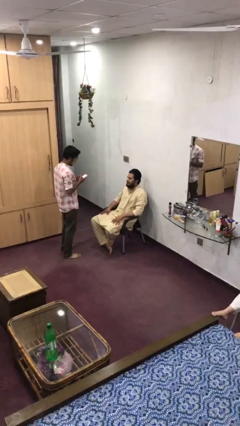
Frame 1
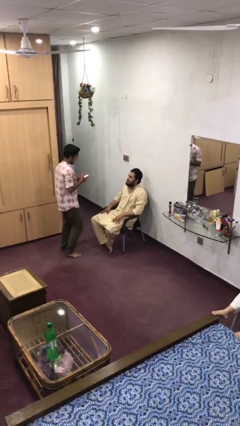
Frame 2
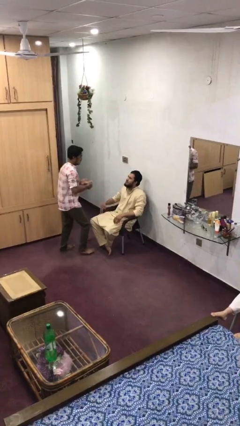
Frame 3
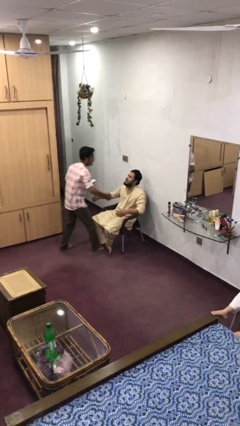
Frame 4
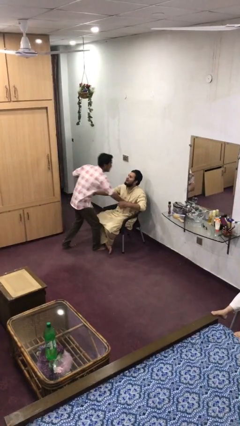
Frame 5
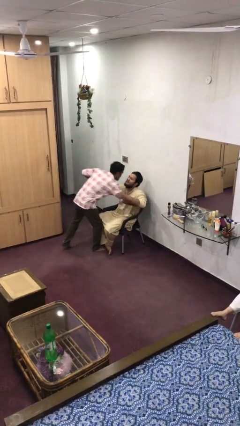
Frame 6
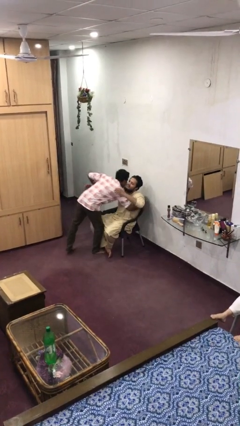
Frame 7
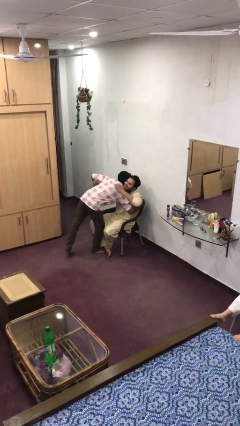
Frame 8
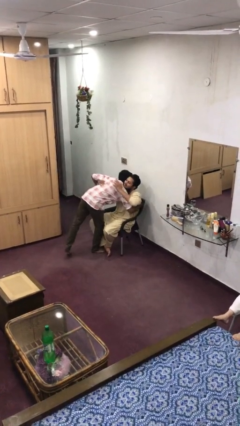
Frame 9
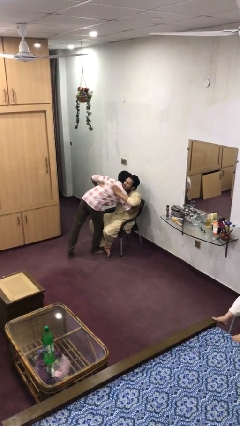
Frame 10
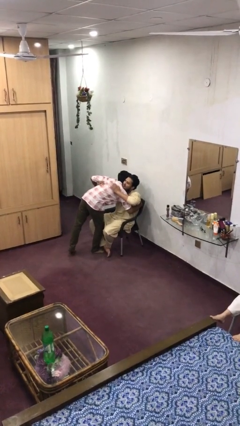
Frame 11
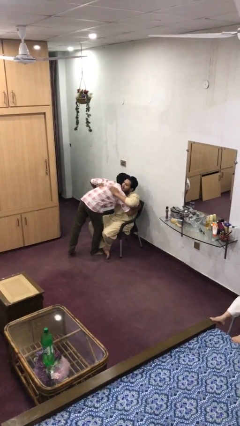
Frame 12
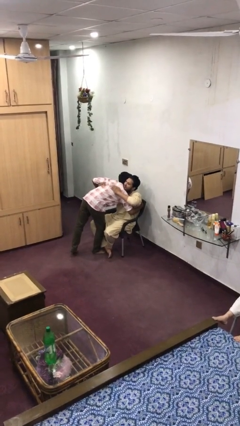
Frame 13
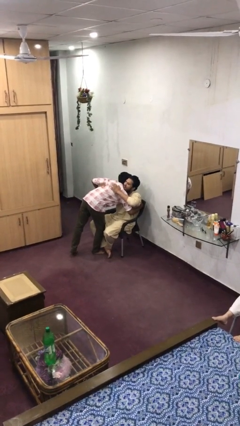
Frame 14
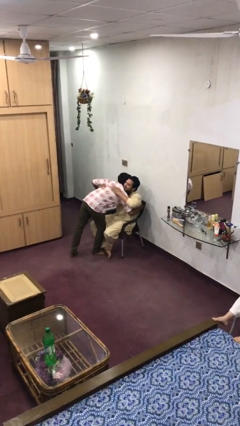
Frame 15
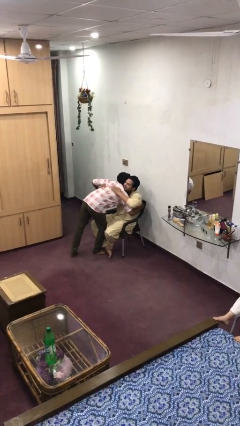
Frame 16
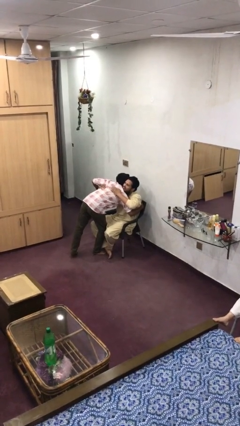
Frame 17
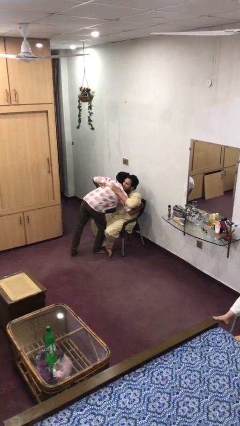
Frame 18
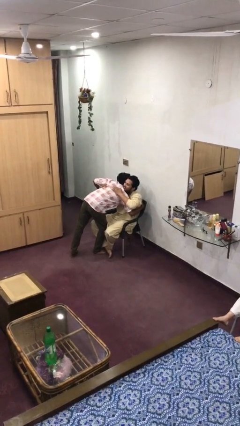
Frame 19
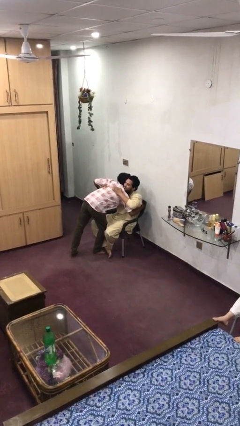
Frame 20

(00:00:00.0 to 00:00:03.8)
person embraces person

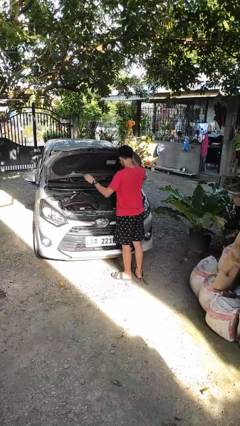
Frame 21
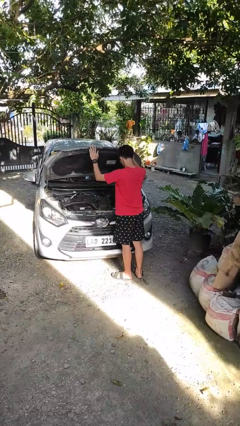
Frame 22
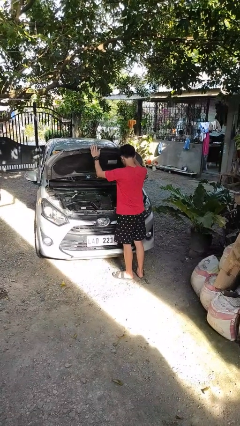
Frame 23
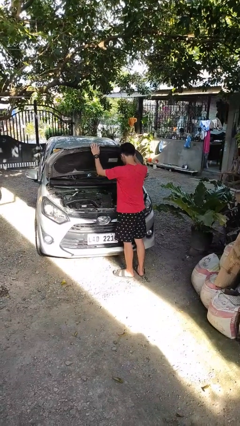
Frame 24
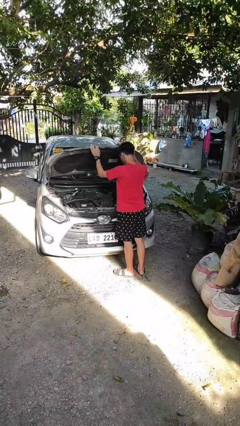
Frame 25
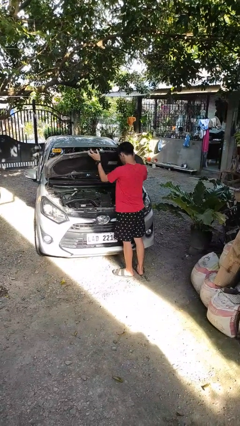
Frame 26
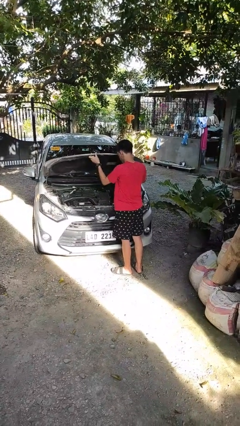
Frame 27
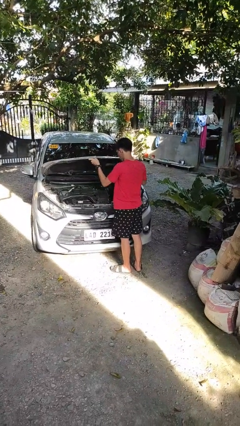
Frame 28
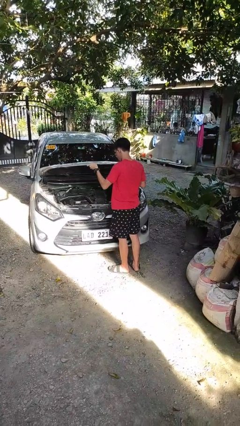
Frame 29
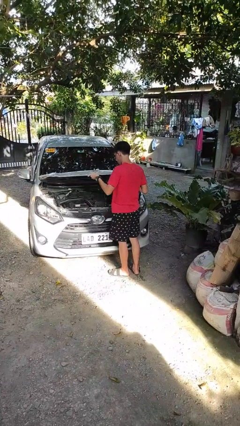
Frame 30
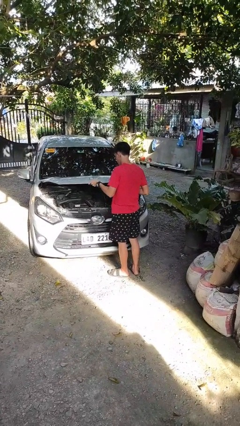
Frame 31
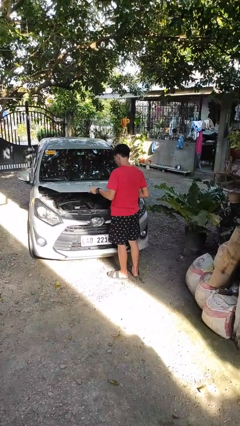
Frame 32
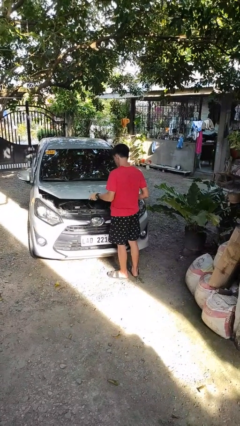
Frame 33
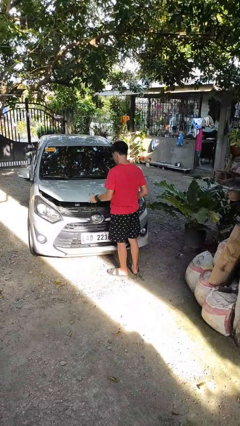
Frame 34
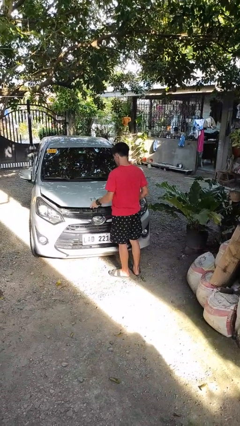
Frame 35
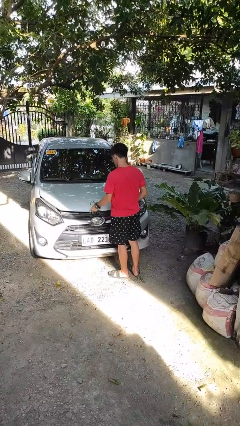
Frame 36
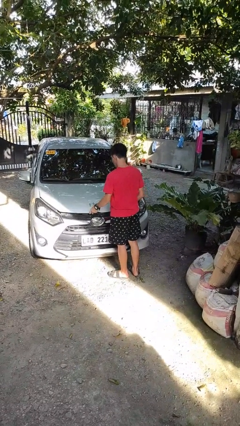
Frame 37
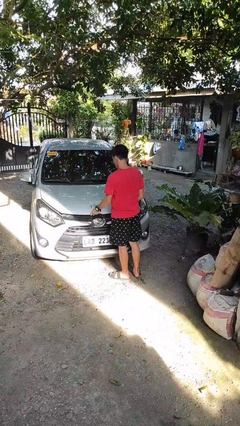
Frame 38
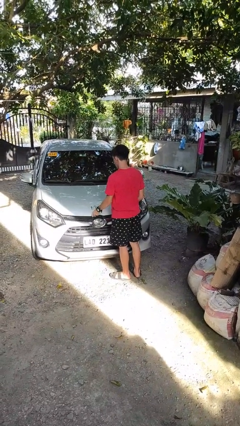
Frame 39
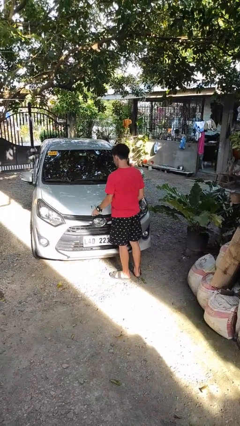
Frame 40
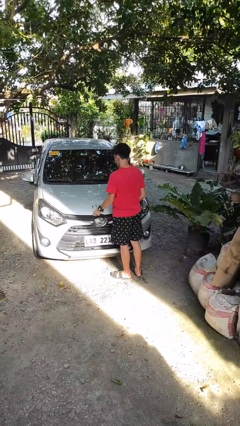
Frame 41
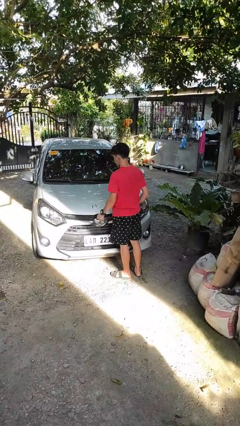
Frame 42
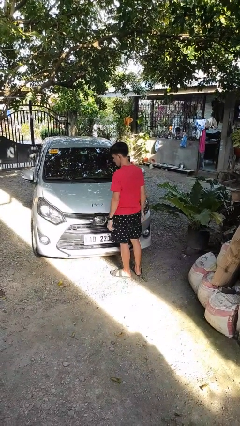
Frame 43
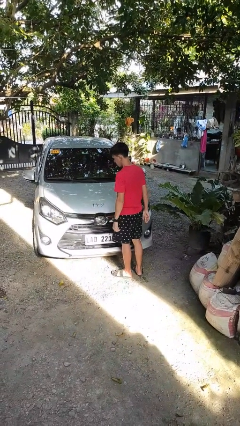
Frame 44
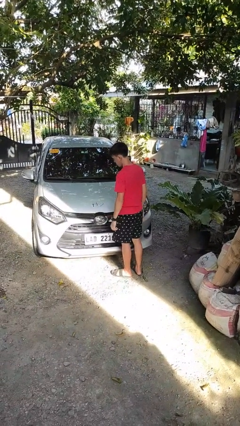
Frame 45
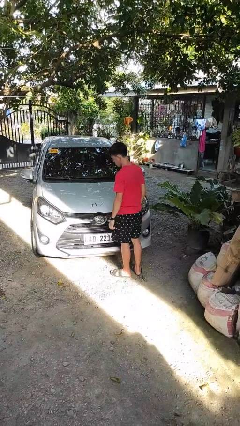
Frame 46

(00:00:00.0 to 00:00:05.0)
person closes car hood

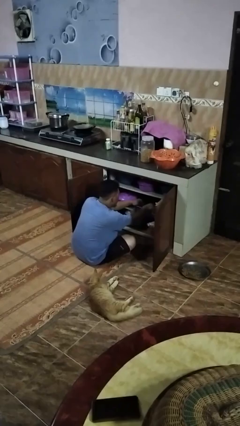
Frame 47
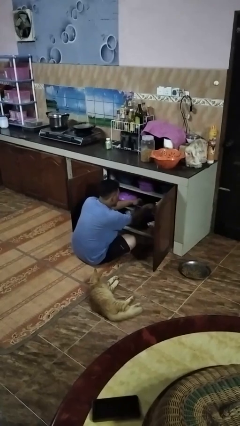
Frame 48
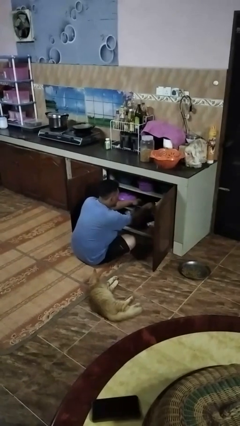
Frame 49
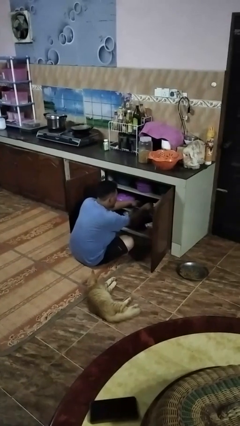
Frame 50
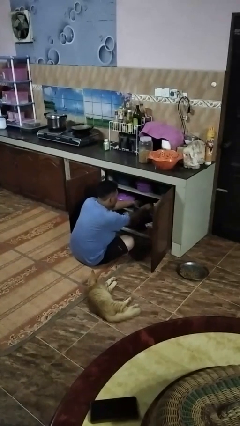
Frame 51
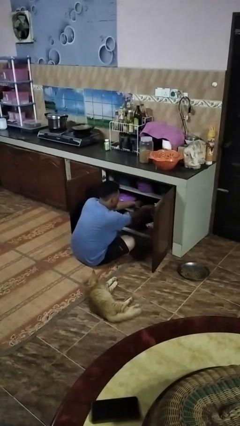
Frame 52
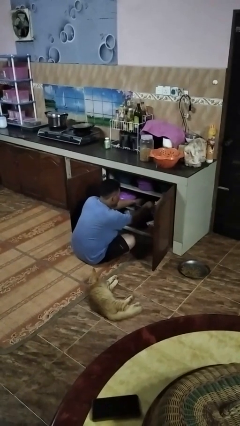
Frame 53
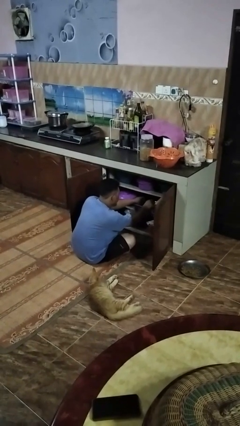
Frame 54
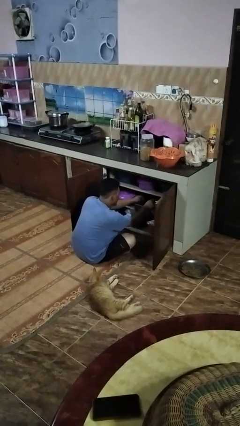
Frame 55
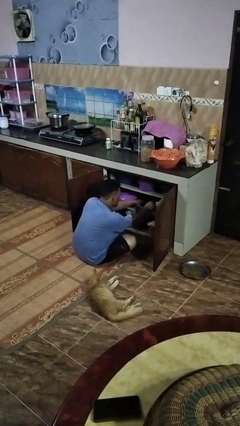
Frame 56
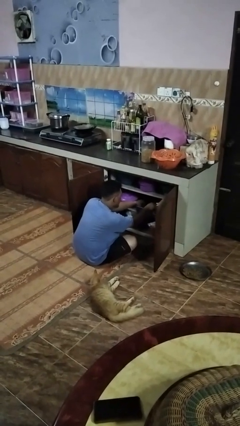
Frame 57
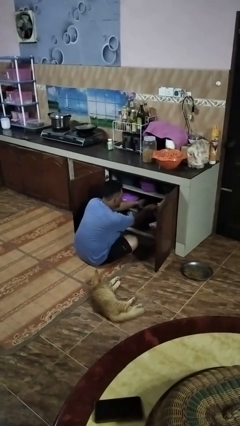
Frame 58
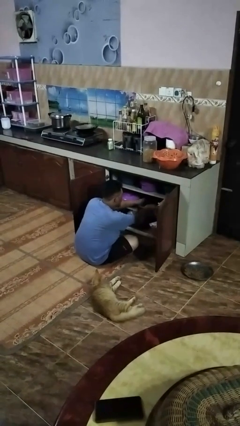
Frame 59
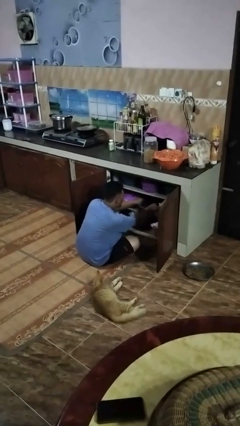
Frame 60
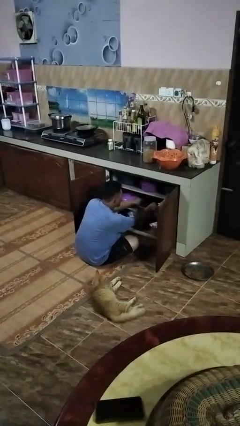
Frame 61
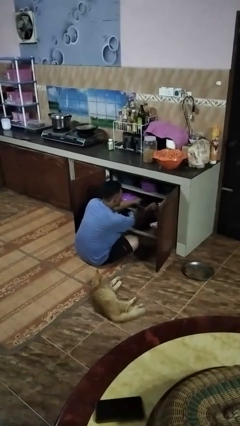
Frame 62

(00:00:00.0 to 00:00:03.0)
person searches in kitchen drawer

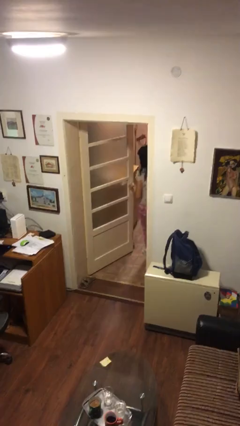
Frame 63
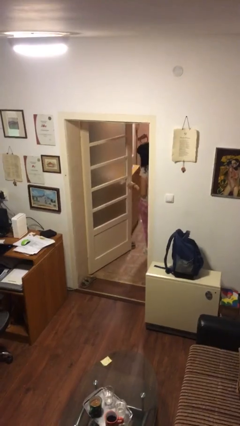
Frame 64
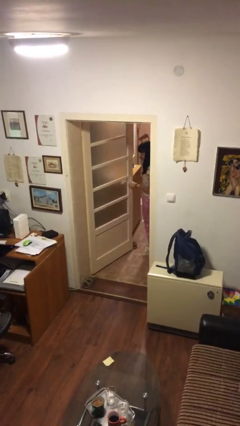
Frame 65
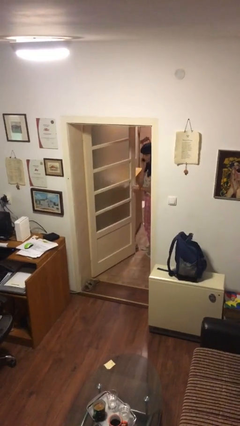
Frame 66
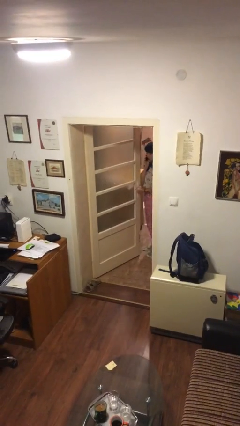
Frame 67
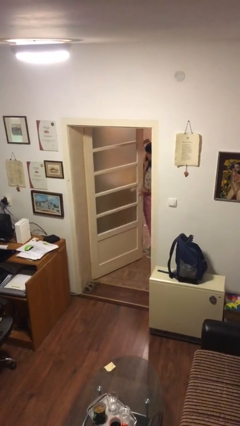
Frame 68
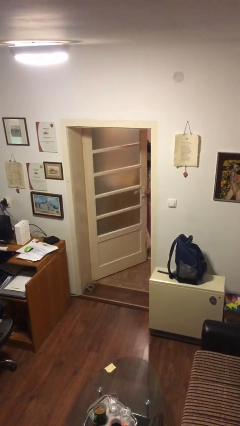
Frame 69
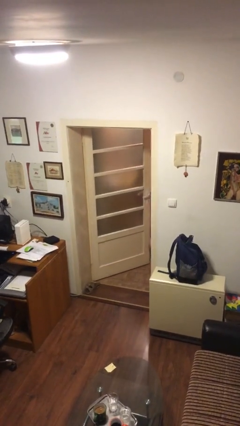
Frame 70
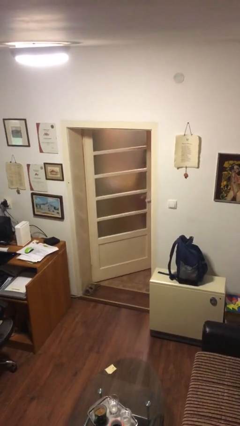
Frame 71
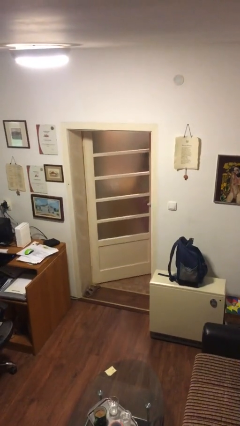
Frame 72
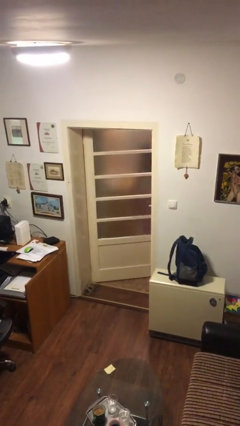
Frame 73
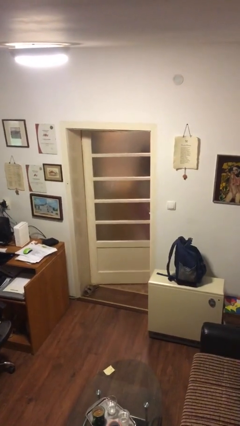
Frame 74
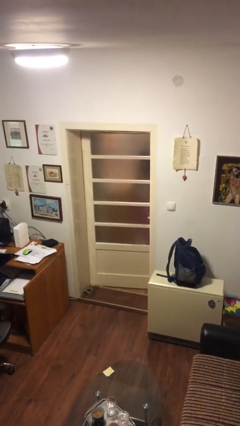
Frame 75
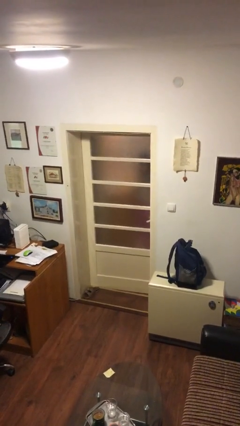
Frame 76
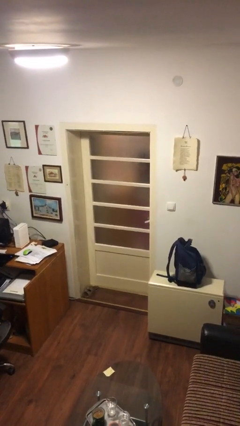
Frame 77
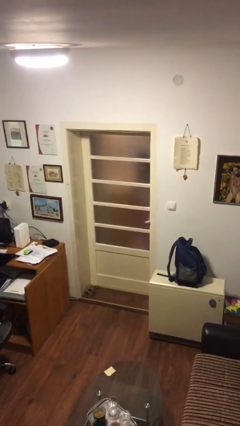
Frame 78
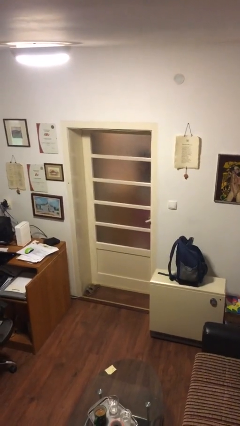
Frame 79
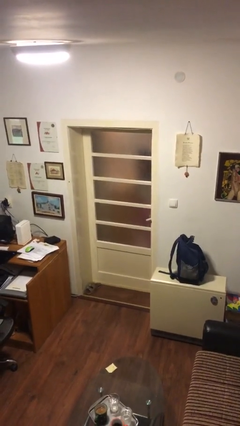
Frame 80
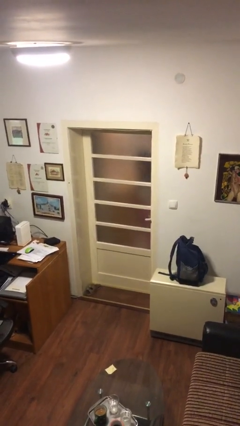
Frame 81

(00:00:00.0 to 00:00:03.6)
person closes facility door

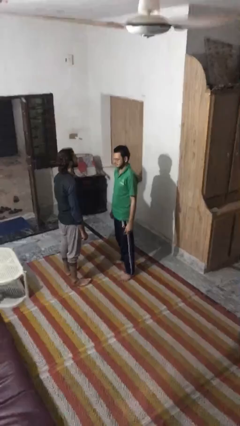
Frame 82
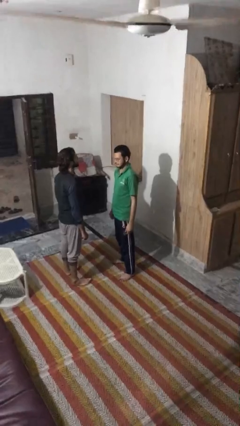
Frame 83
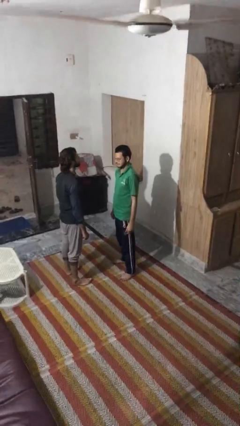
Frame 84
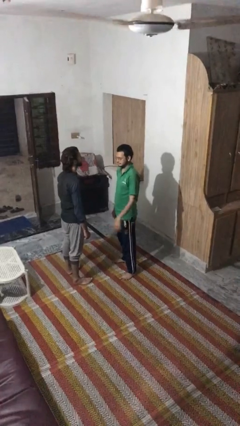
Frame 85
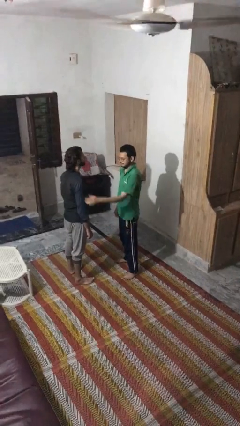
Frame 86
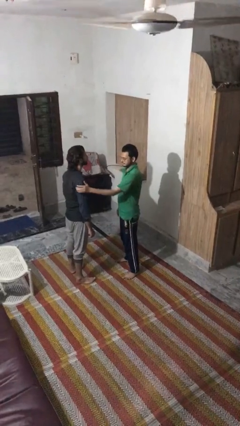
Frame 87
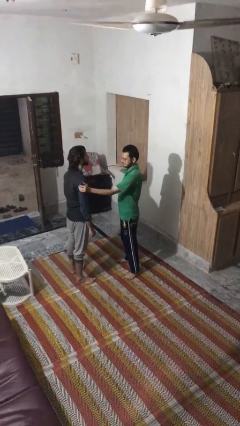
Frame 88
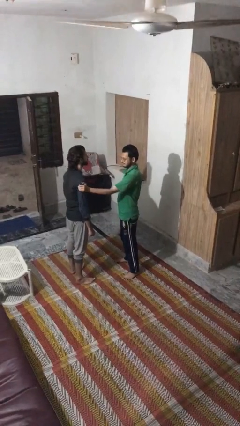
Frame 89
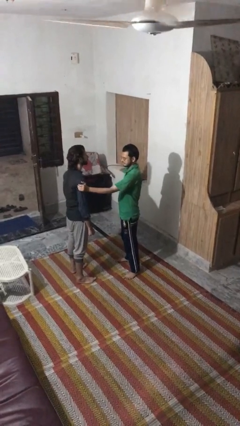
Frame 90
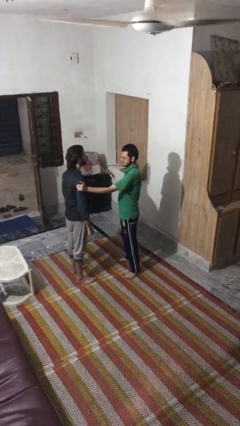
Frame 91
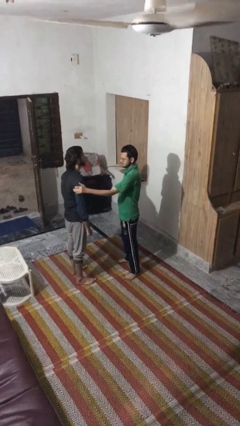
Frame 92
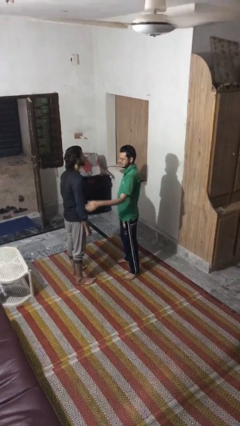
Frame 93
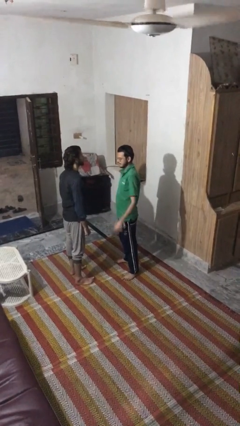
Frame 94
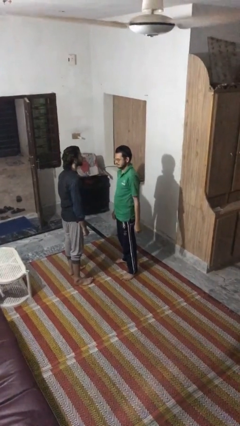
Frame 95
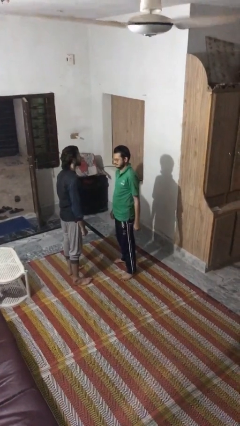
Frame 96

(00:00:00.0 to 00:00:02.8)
person grabs person by bicep
